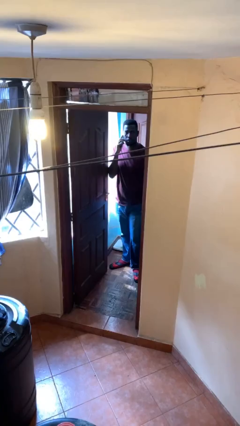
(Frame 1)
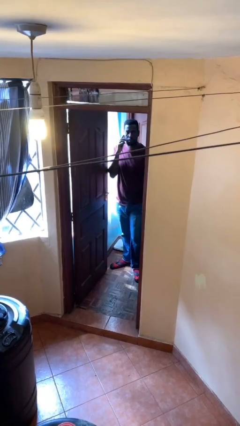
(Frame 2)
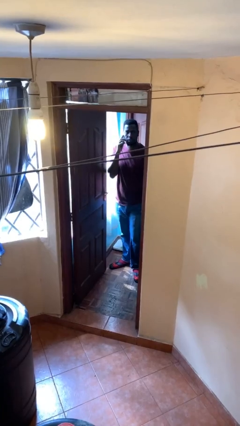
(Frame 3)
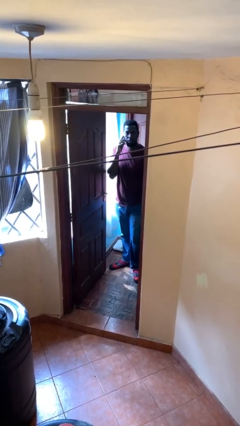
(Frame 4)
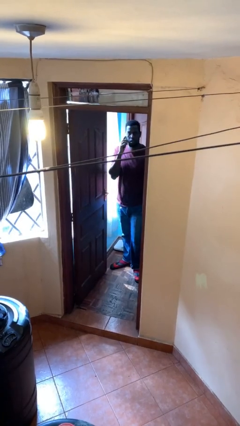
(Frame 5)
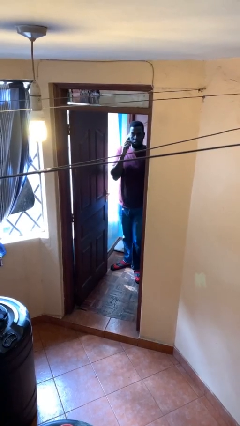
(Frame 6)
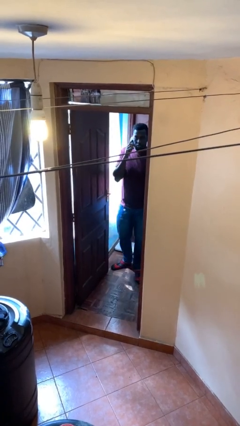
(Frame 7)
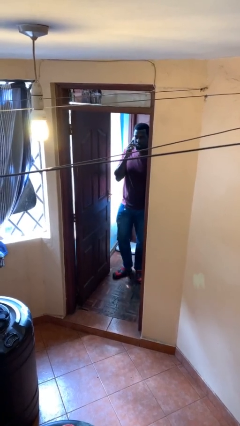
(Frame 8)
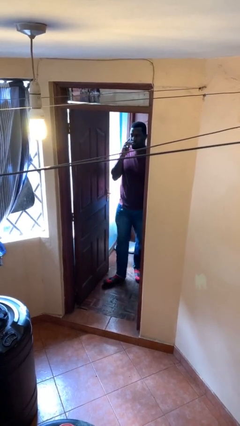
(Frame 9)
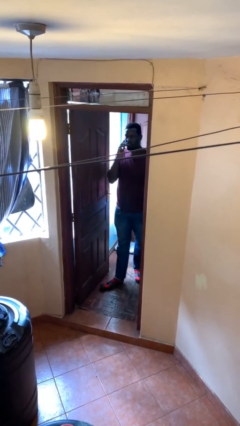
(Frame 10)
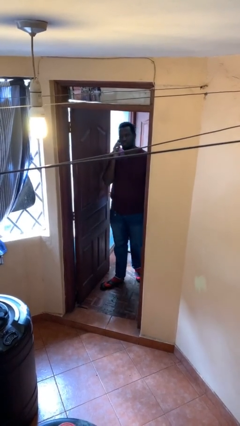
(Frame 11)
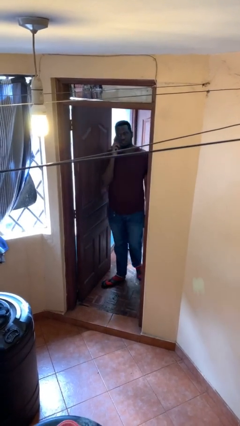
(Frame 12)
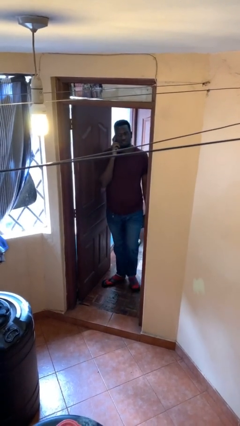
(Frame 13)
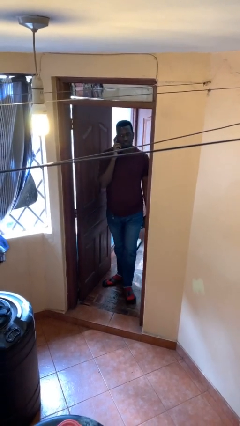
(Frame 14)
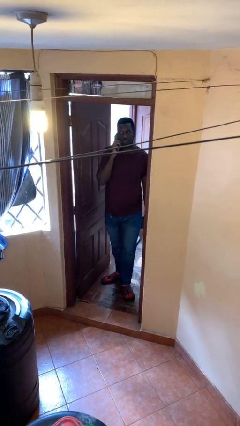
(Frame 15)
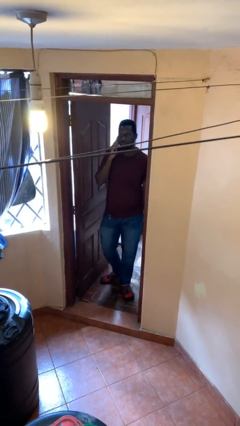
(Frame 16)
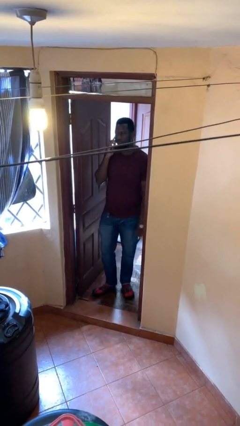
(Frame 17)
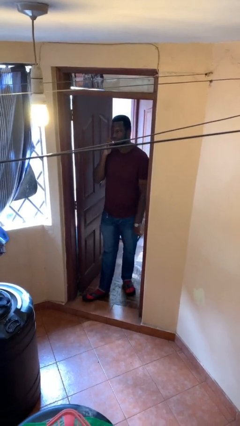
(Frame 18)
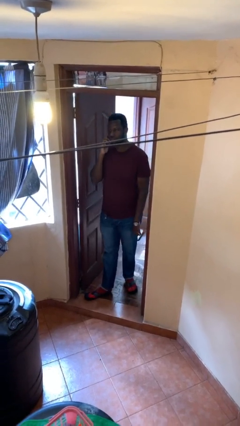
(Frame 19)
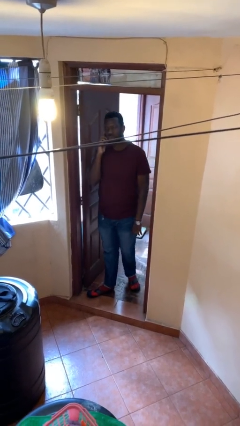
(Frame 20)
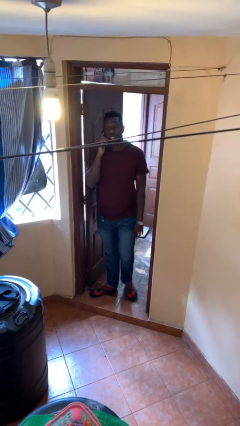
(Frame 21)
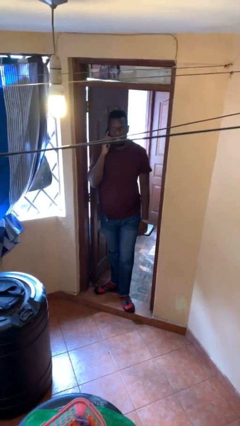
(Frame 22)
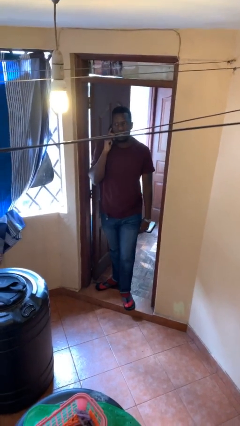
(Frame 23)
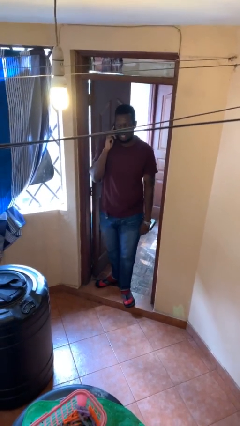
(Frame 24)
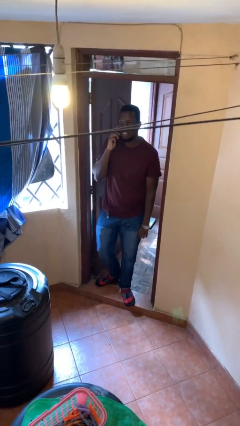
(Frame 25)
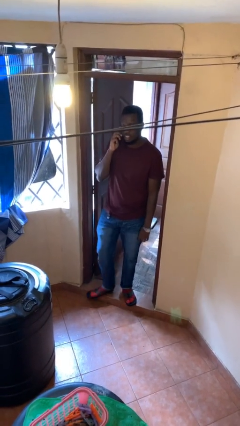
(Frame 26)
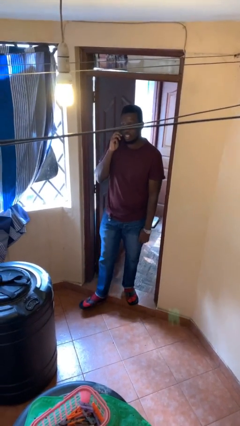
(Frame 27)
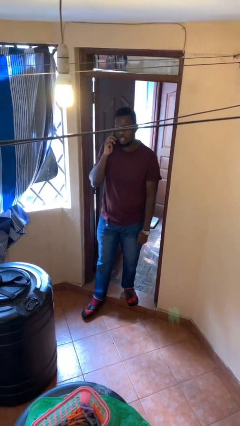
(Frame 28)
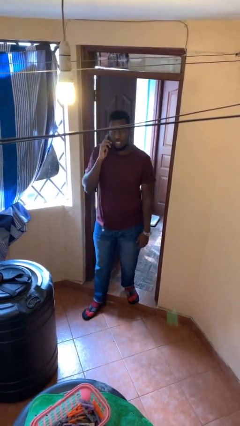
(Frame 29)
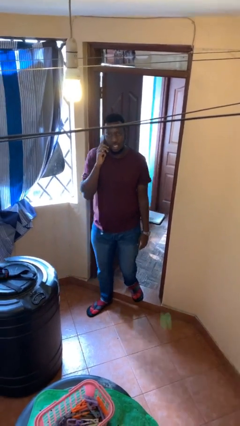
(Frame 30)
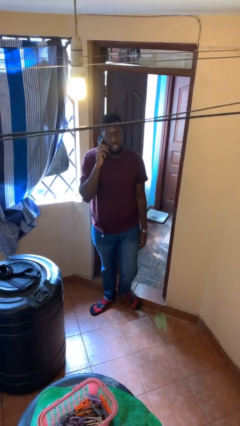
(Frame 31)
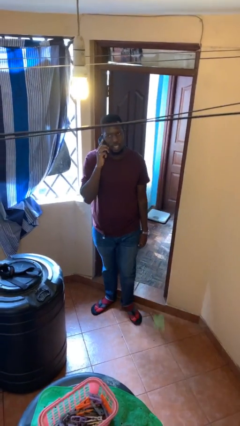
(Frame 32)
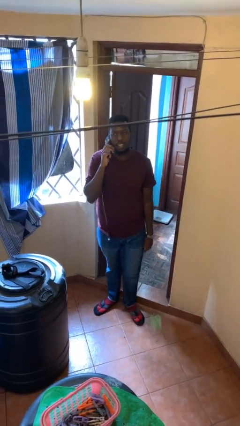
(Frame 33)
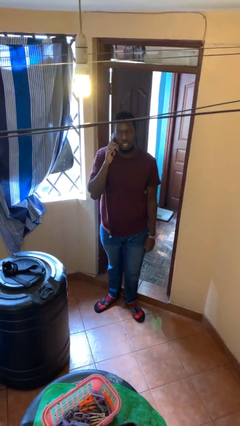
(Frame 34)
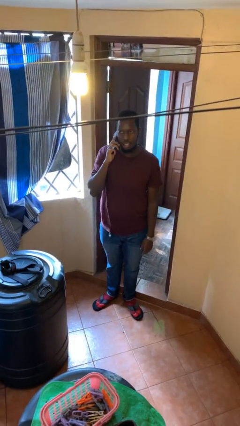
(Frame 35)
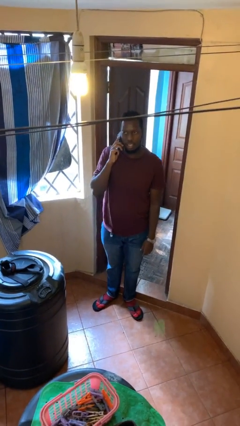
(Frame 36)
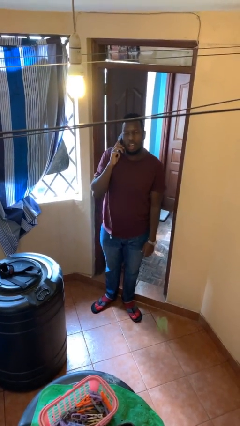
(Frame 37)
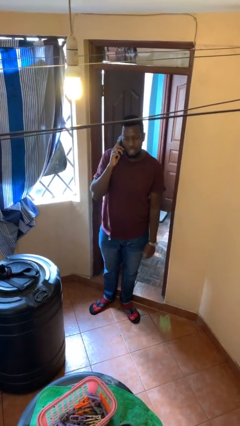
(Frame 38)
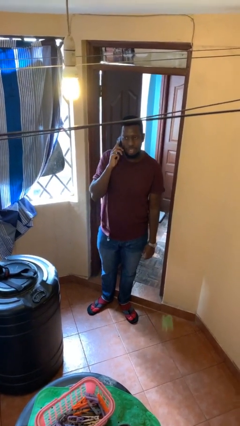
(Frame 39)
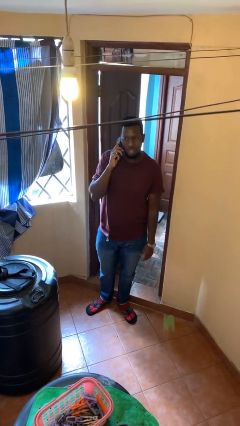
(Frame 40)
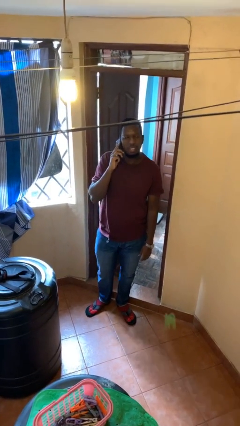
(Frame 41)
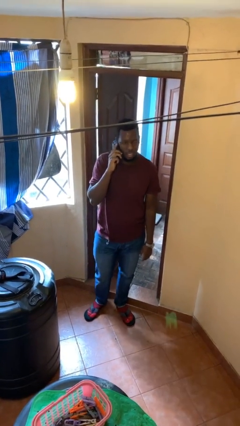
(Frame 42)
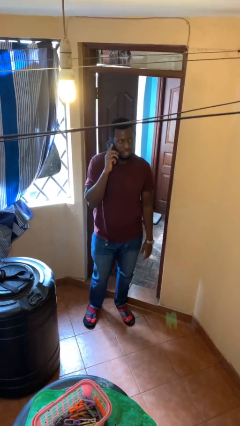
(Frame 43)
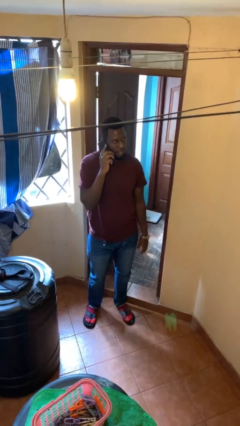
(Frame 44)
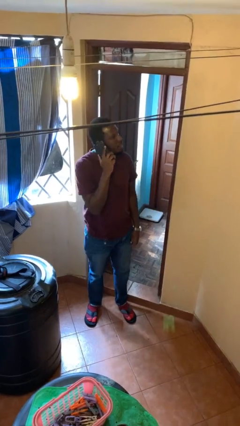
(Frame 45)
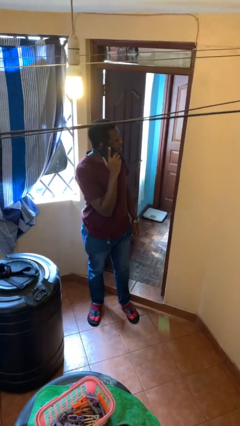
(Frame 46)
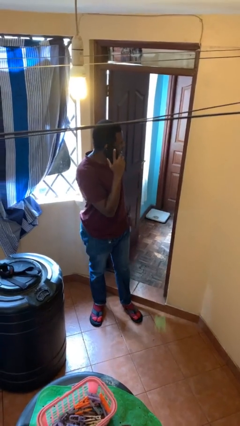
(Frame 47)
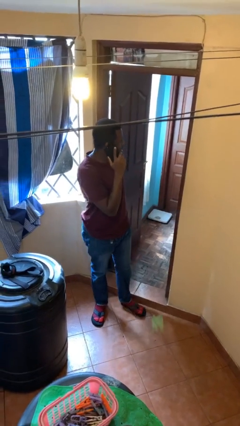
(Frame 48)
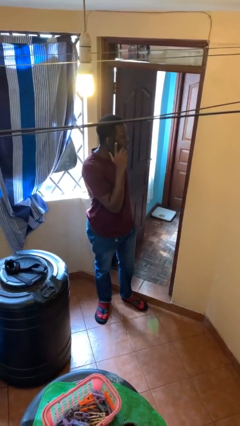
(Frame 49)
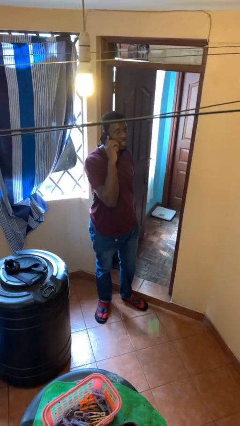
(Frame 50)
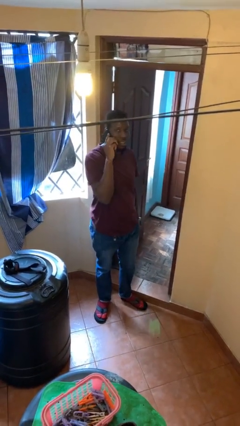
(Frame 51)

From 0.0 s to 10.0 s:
person enters scene through structure

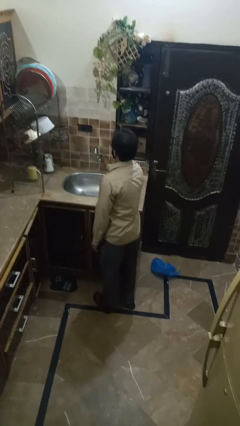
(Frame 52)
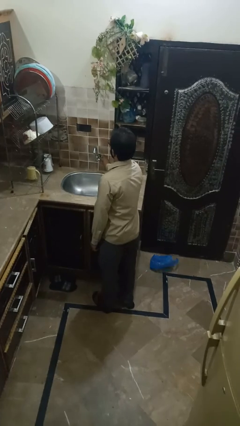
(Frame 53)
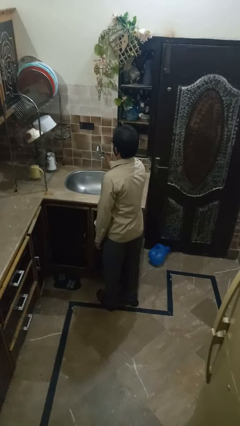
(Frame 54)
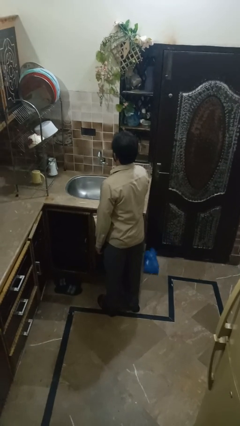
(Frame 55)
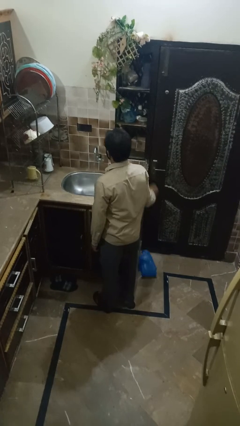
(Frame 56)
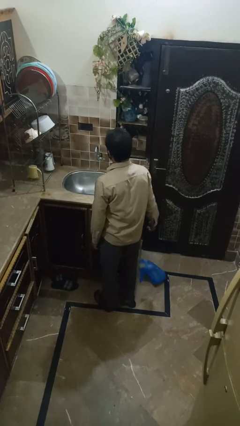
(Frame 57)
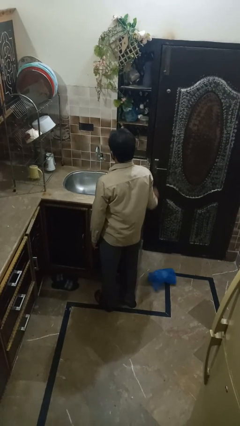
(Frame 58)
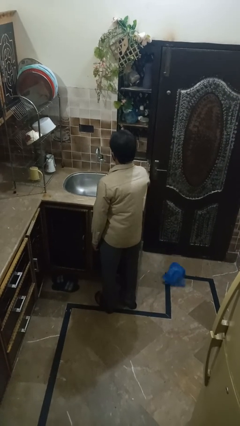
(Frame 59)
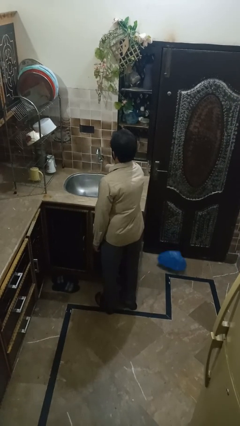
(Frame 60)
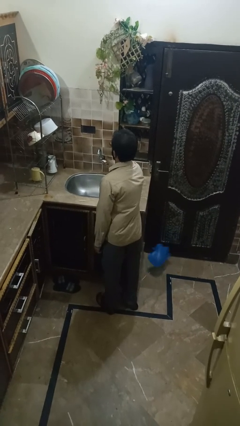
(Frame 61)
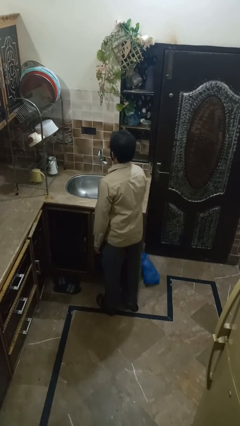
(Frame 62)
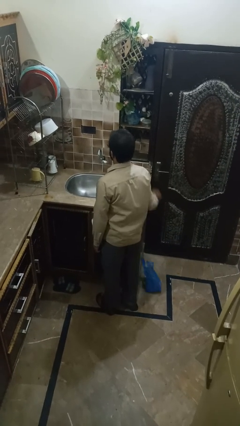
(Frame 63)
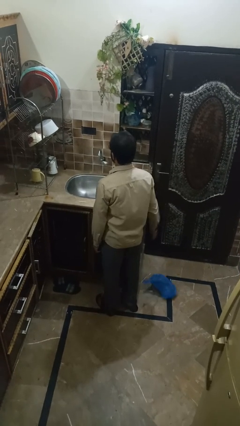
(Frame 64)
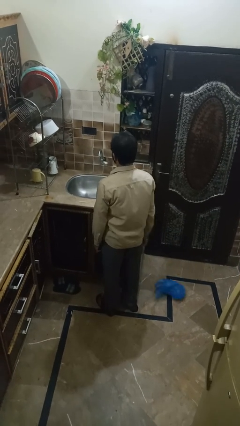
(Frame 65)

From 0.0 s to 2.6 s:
person closes dishwasher

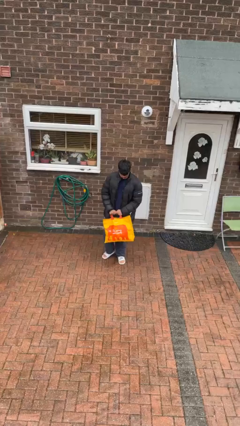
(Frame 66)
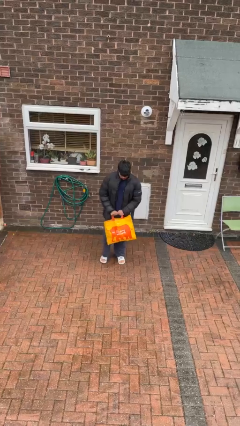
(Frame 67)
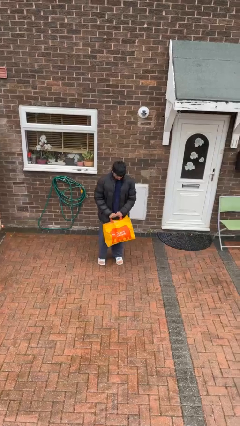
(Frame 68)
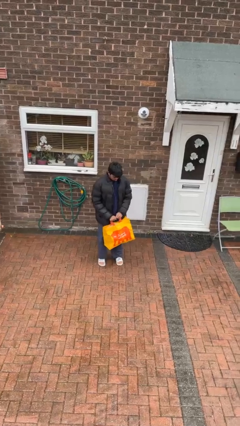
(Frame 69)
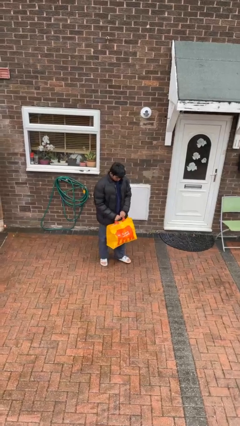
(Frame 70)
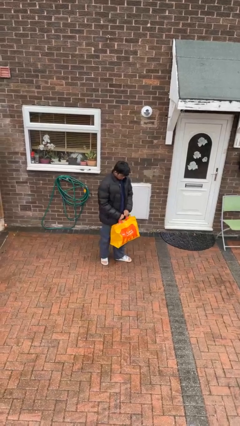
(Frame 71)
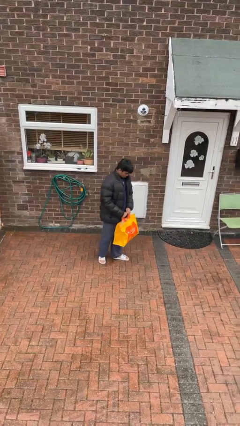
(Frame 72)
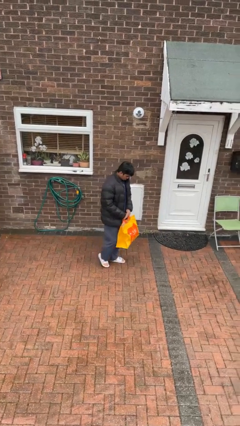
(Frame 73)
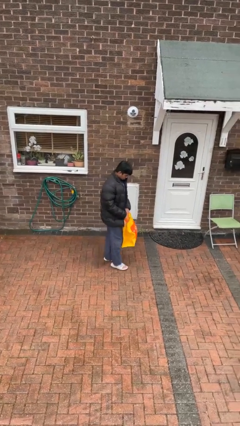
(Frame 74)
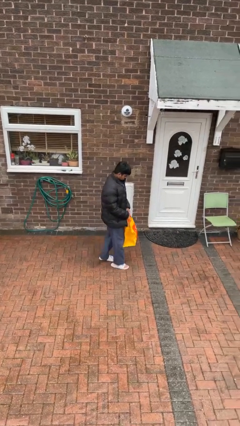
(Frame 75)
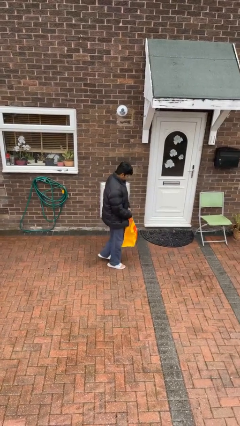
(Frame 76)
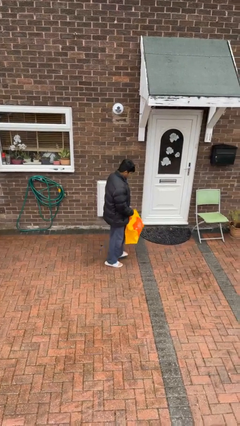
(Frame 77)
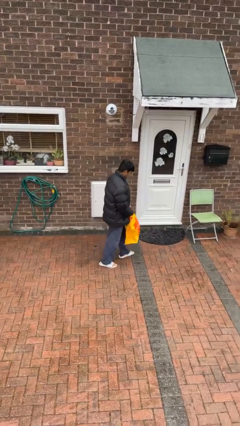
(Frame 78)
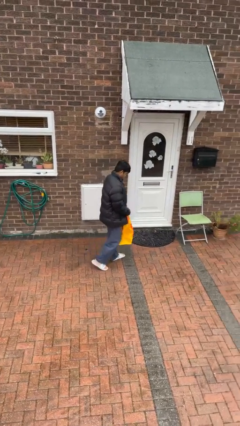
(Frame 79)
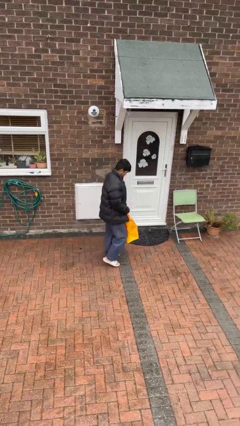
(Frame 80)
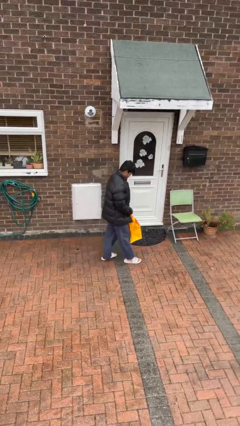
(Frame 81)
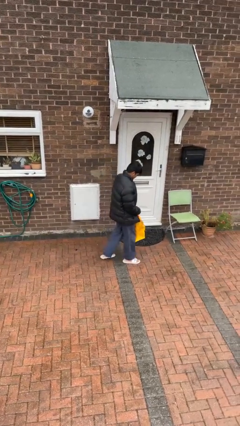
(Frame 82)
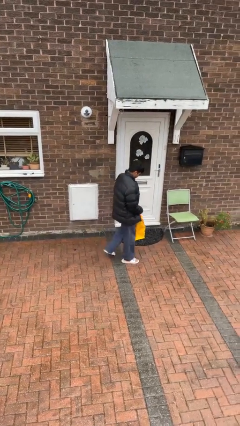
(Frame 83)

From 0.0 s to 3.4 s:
person carries groceries

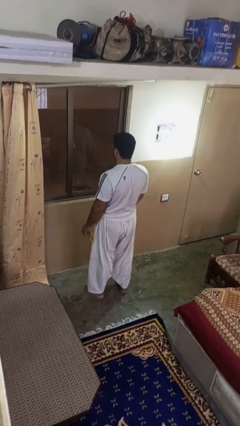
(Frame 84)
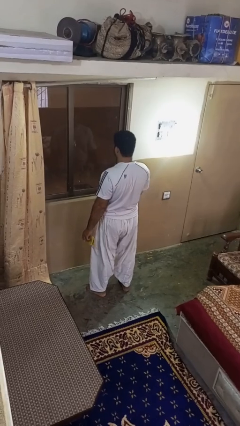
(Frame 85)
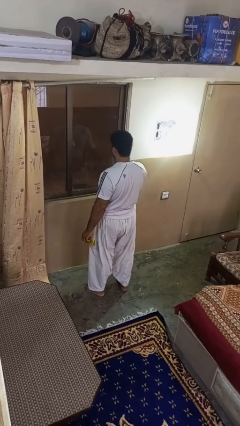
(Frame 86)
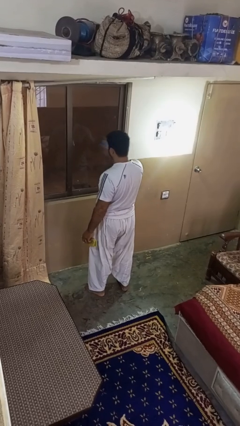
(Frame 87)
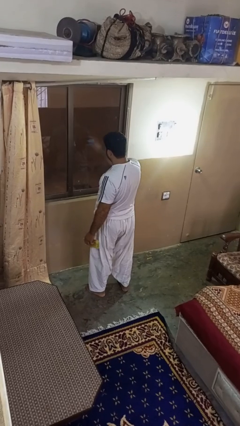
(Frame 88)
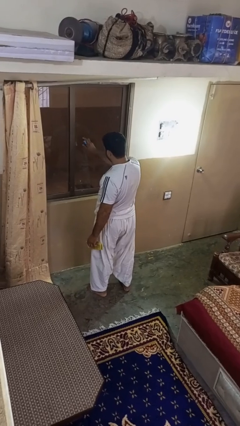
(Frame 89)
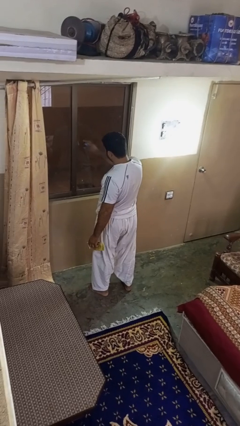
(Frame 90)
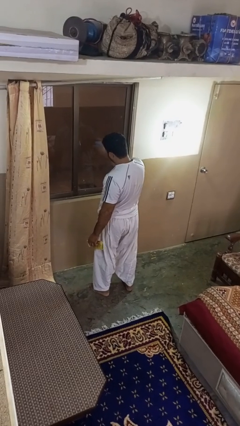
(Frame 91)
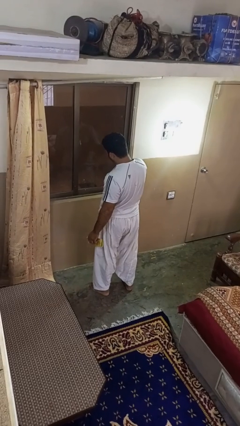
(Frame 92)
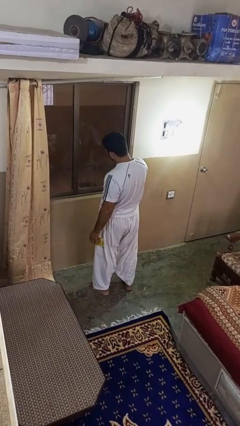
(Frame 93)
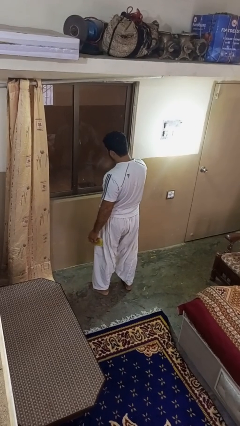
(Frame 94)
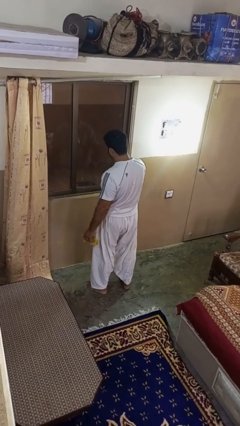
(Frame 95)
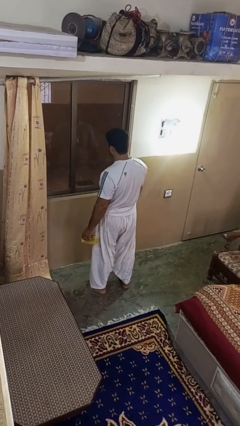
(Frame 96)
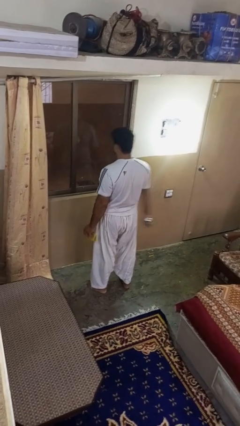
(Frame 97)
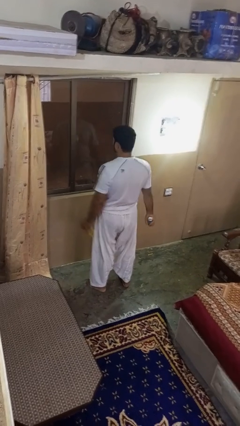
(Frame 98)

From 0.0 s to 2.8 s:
person sprays from bottle
